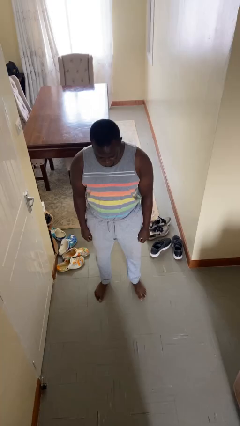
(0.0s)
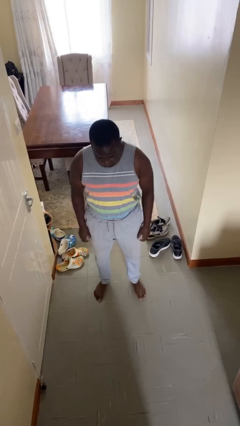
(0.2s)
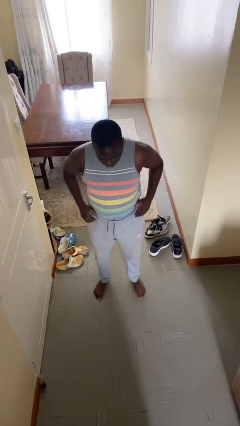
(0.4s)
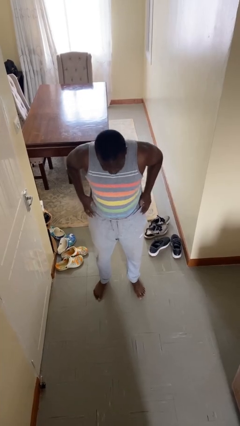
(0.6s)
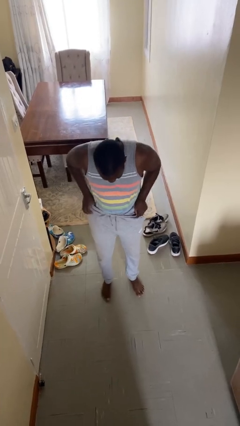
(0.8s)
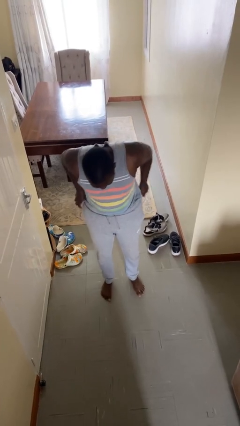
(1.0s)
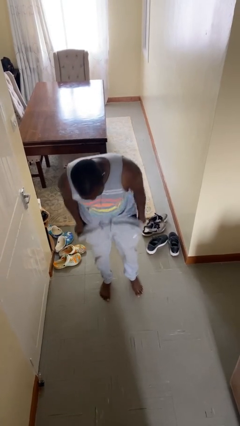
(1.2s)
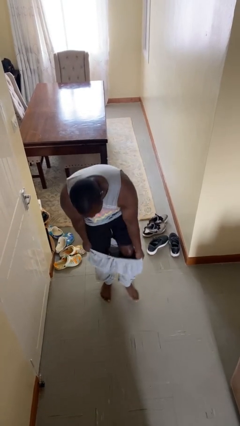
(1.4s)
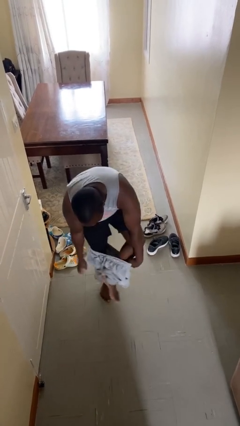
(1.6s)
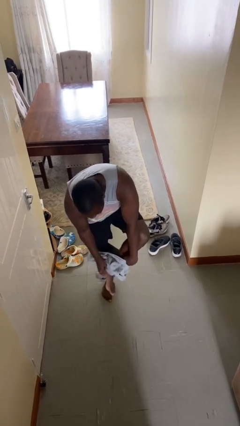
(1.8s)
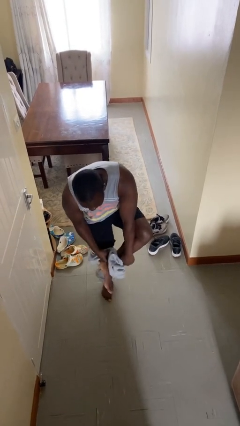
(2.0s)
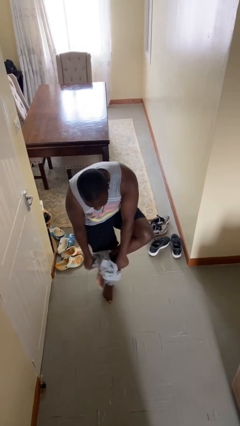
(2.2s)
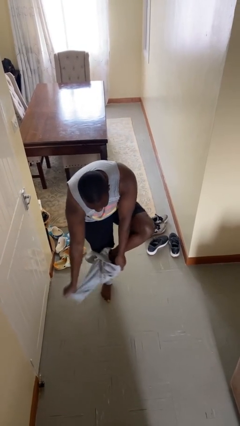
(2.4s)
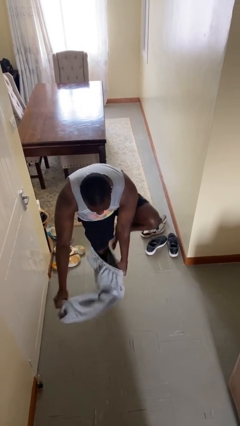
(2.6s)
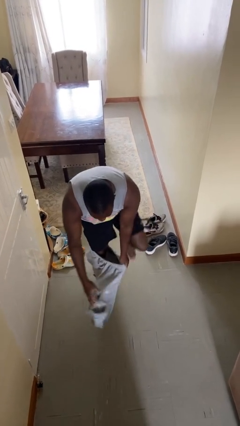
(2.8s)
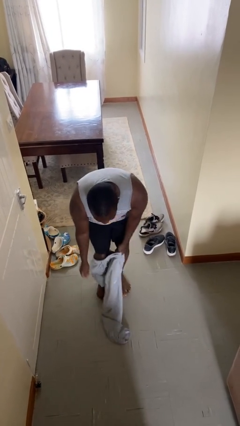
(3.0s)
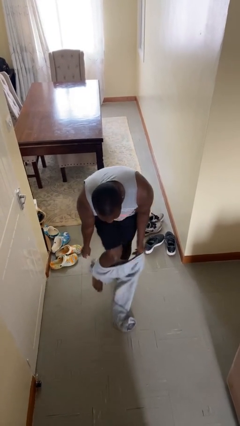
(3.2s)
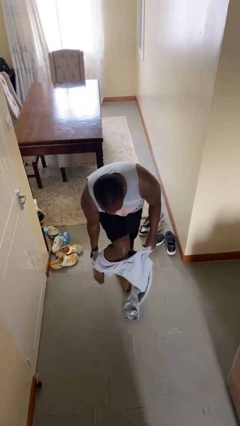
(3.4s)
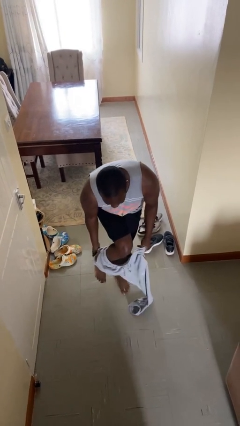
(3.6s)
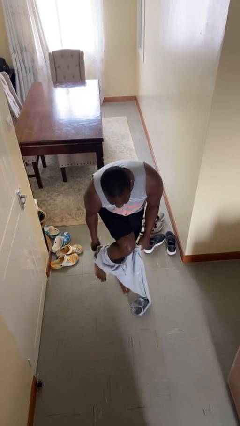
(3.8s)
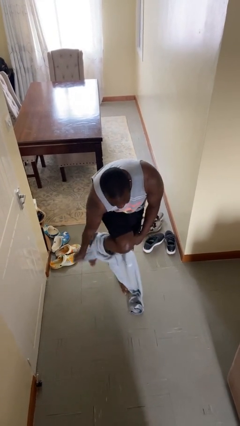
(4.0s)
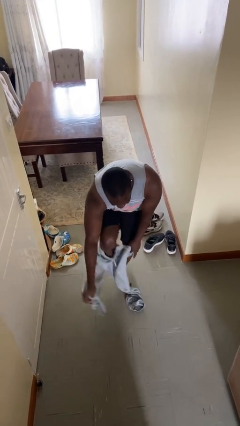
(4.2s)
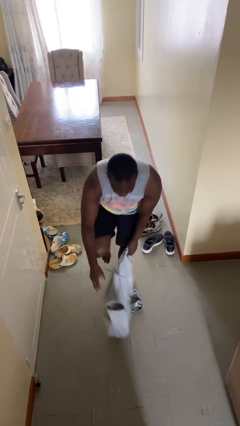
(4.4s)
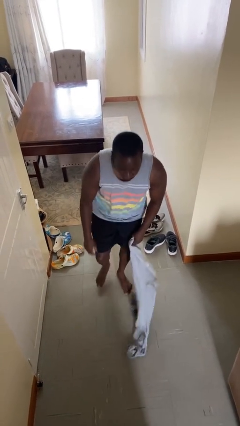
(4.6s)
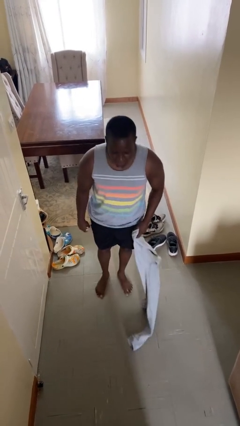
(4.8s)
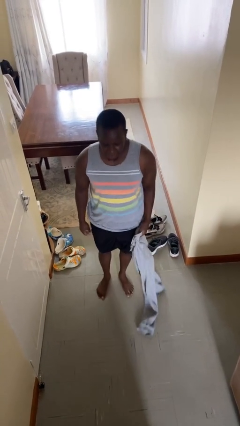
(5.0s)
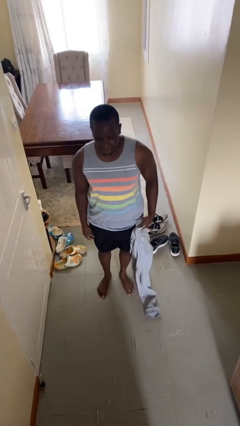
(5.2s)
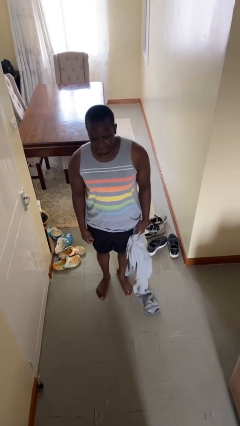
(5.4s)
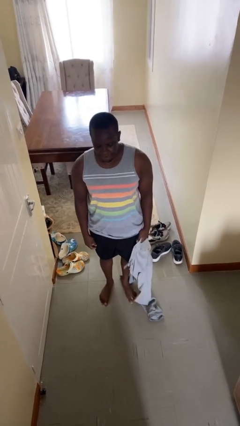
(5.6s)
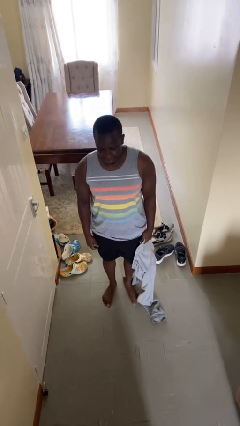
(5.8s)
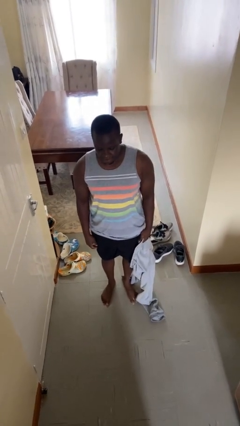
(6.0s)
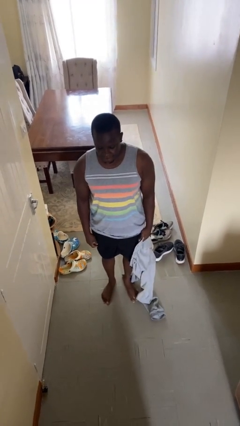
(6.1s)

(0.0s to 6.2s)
person takes off pants

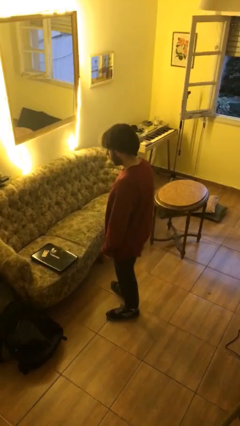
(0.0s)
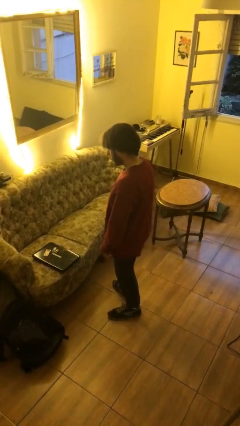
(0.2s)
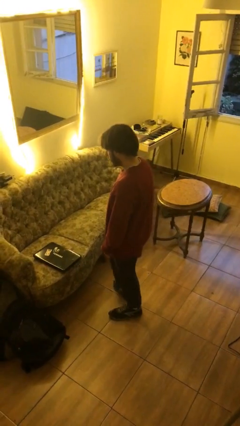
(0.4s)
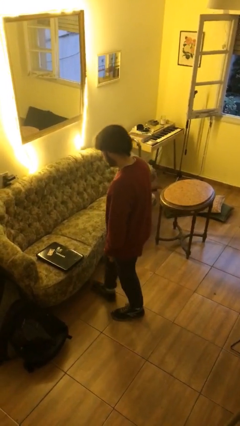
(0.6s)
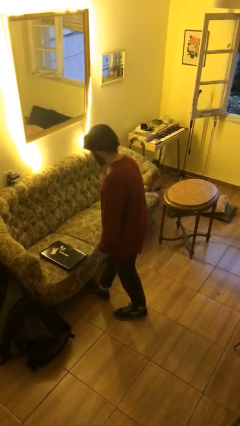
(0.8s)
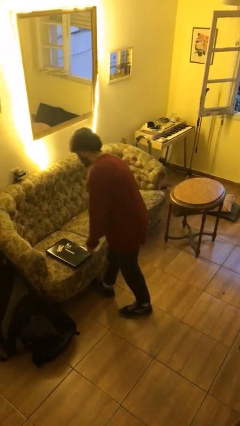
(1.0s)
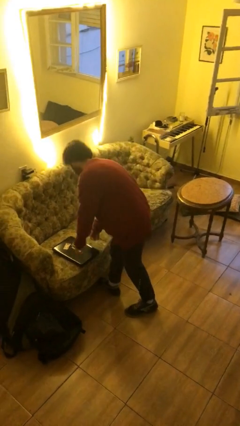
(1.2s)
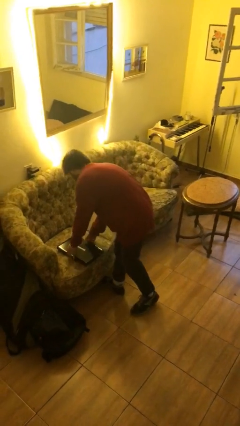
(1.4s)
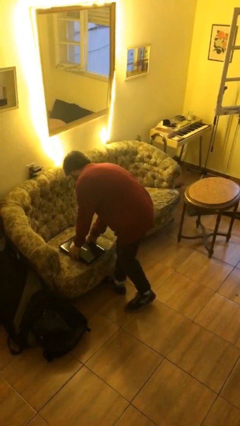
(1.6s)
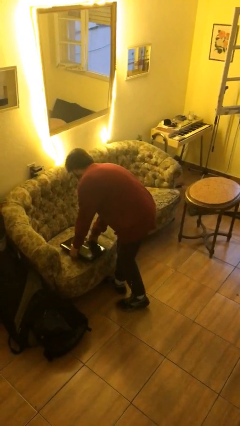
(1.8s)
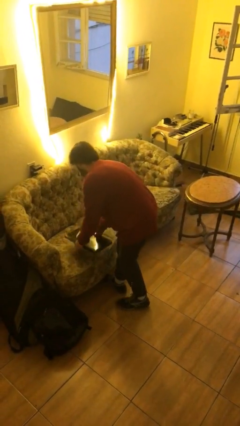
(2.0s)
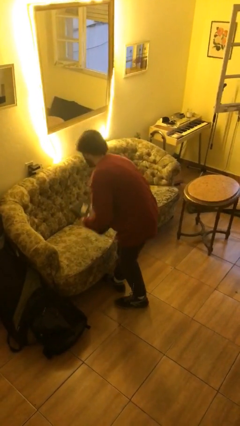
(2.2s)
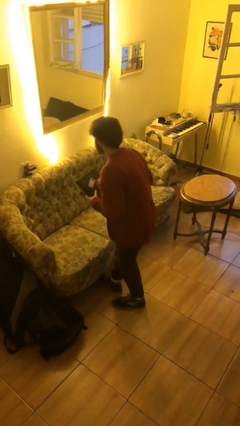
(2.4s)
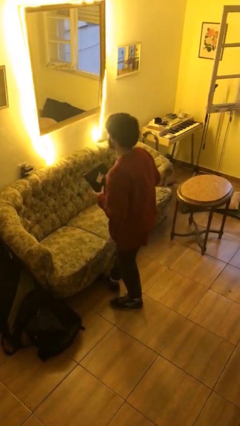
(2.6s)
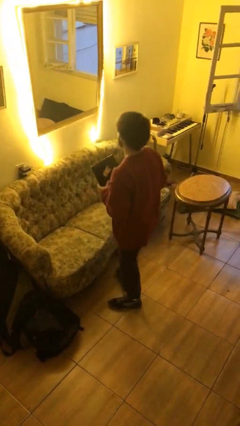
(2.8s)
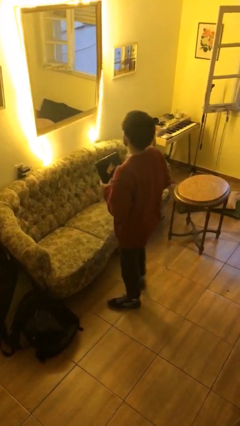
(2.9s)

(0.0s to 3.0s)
person picks up object from couch

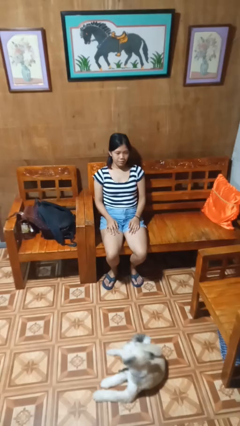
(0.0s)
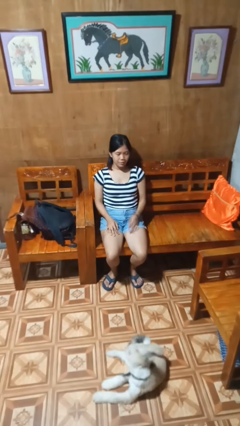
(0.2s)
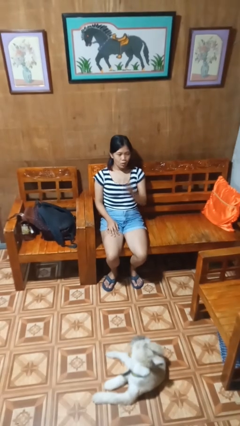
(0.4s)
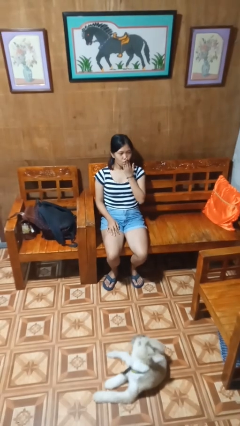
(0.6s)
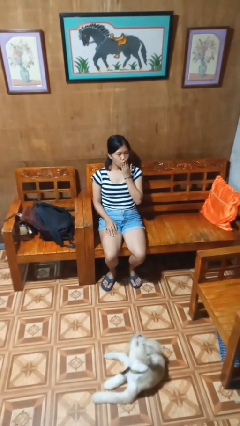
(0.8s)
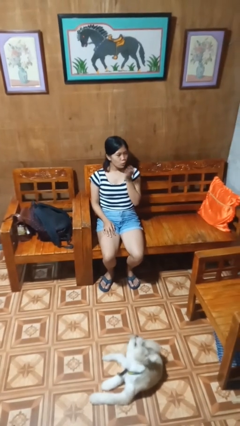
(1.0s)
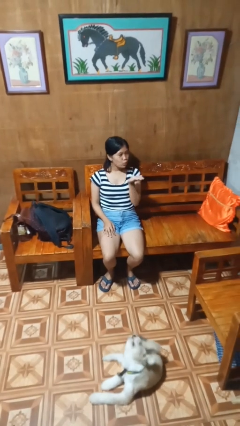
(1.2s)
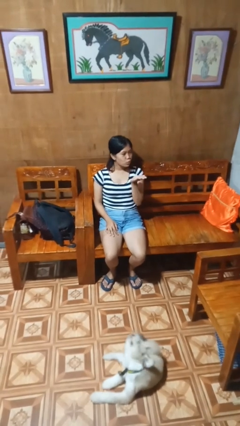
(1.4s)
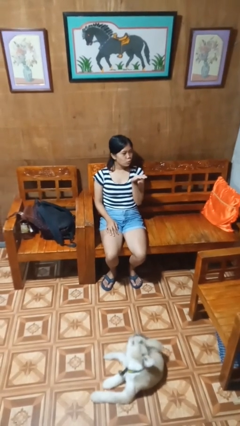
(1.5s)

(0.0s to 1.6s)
person gestures blow kiss

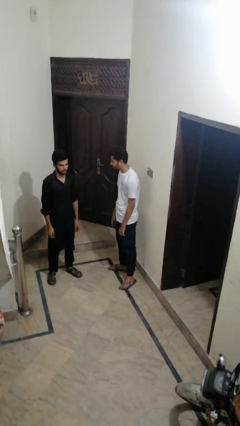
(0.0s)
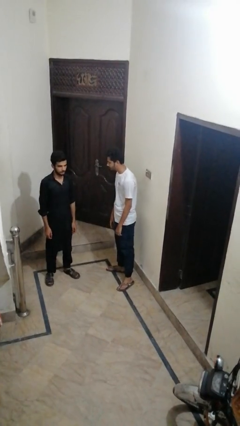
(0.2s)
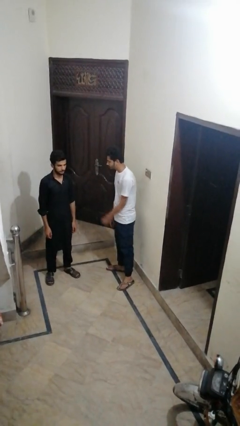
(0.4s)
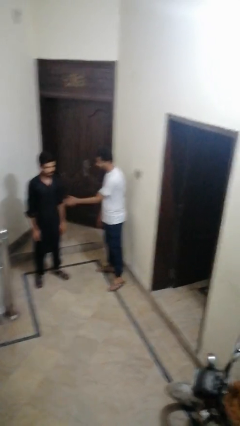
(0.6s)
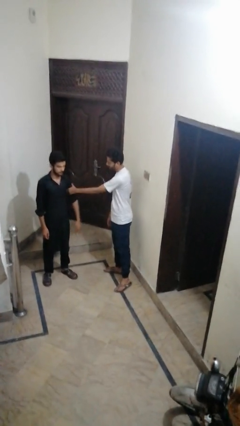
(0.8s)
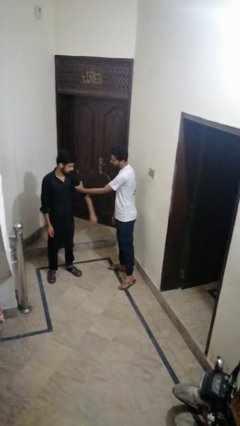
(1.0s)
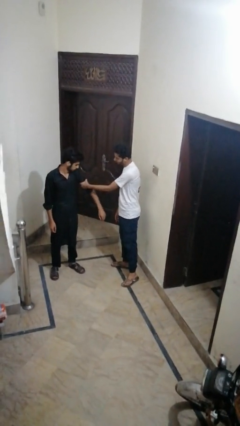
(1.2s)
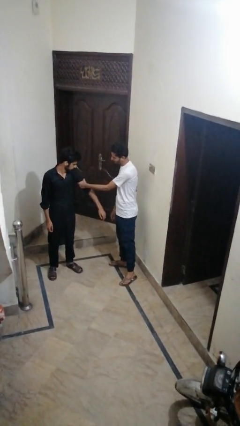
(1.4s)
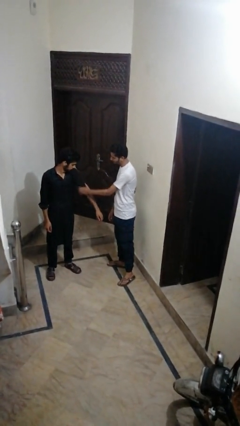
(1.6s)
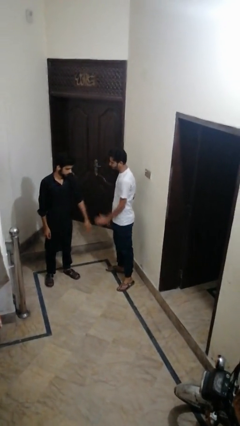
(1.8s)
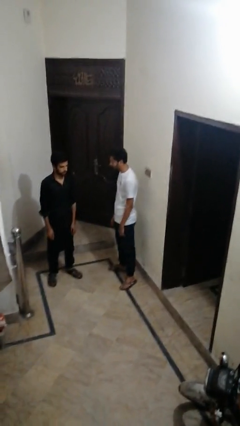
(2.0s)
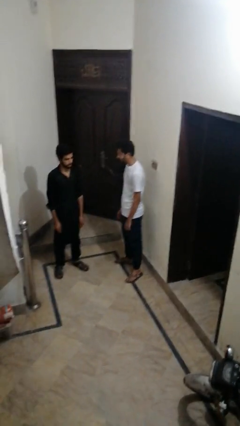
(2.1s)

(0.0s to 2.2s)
person grabs person by bicep

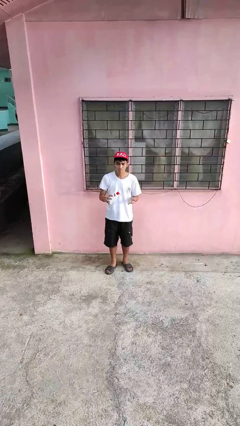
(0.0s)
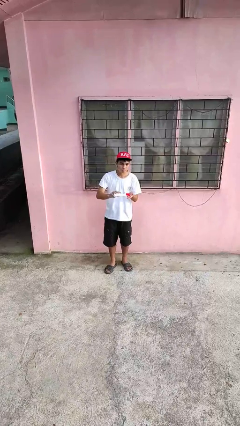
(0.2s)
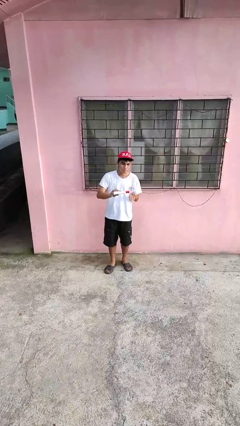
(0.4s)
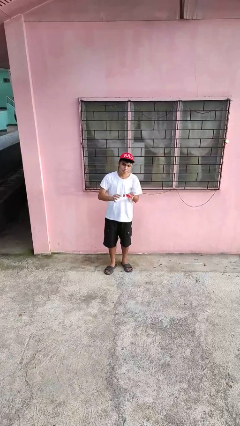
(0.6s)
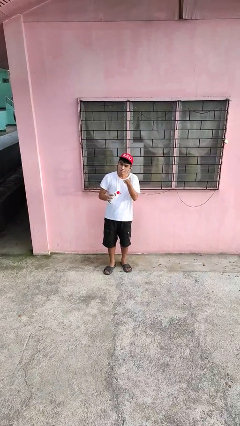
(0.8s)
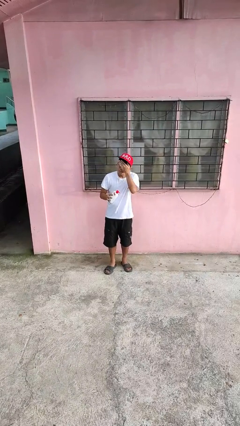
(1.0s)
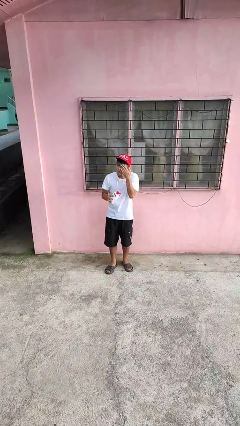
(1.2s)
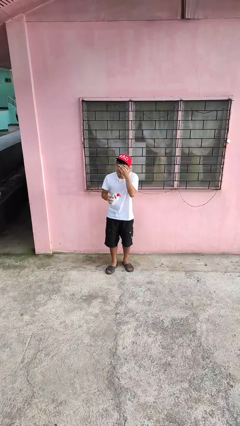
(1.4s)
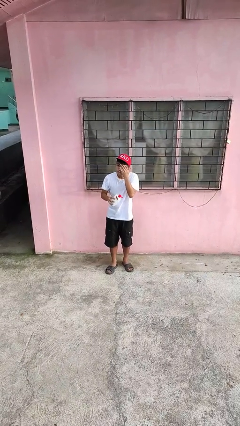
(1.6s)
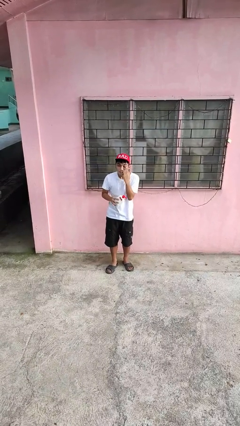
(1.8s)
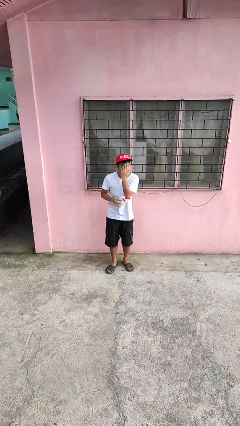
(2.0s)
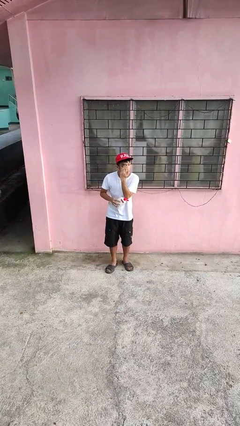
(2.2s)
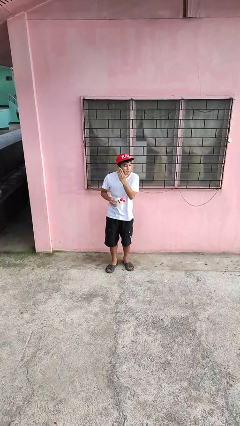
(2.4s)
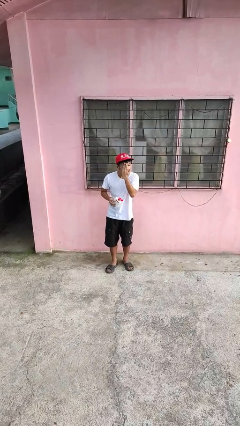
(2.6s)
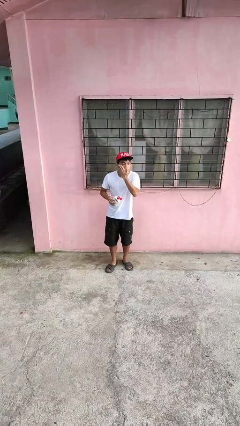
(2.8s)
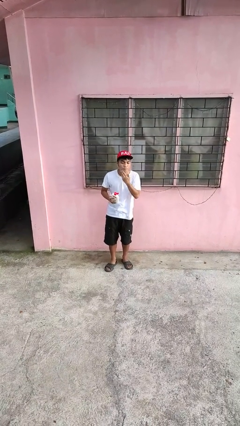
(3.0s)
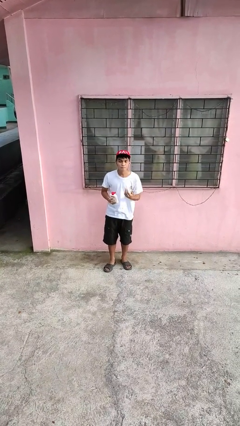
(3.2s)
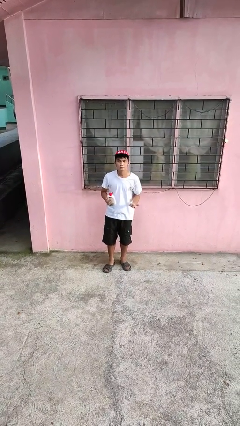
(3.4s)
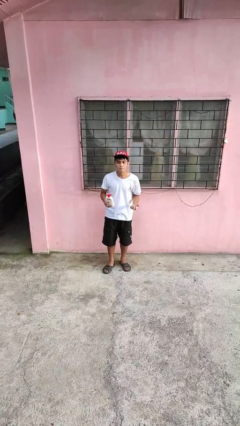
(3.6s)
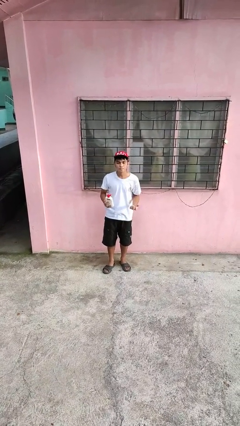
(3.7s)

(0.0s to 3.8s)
person applies facial moisturizer

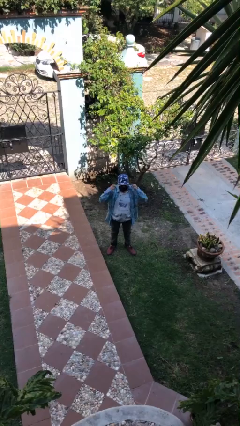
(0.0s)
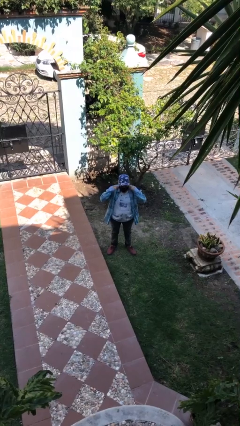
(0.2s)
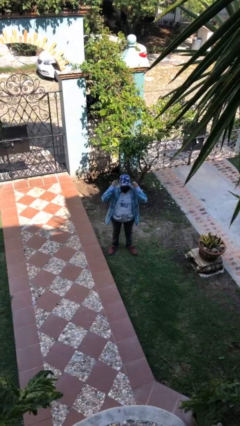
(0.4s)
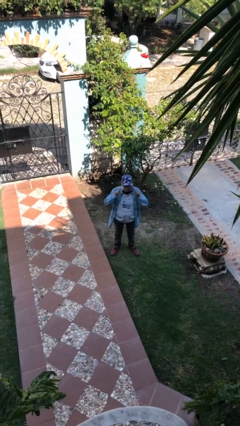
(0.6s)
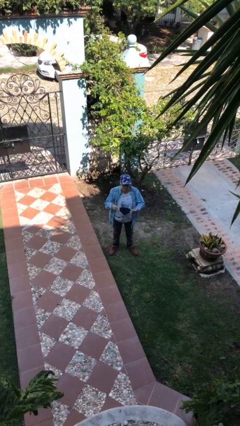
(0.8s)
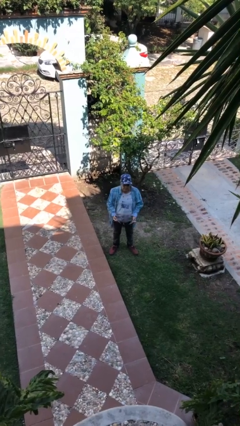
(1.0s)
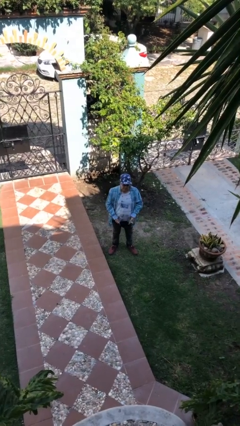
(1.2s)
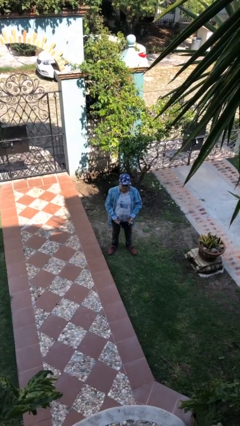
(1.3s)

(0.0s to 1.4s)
person takes off facemask
